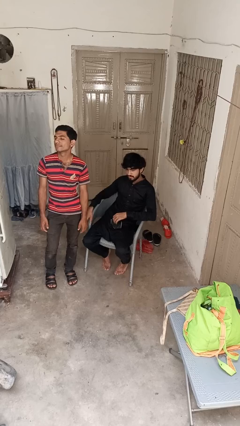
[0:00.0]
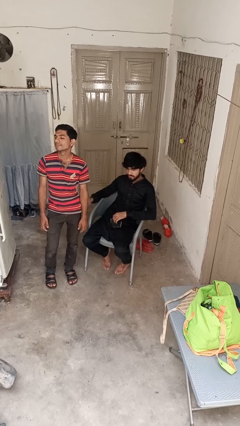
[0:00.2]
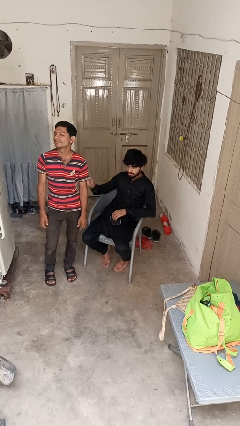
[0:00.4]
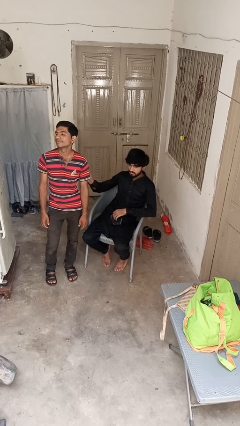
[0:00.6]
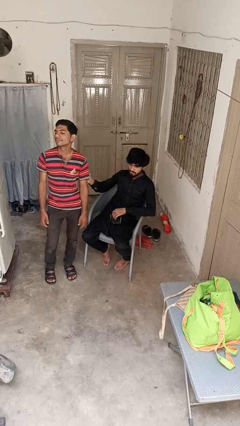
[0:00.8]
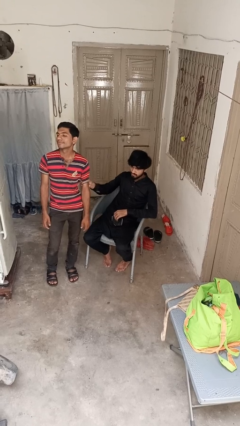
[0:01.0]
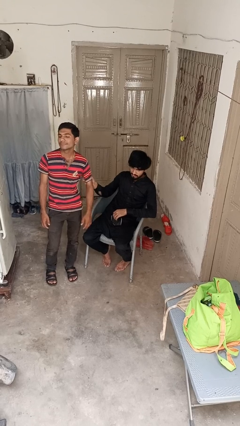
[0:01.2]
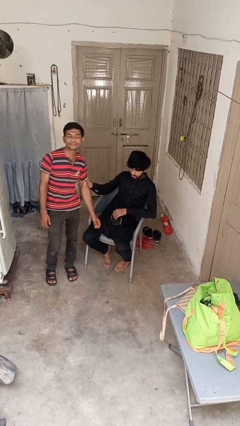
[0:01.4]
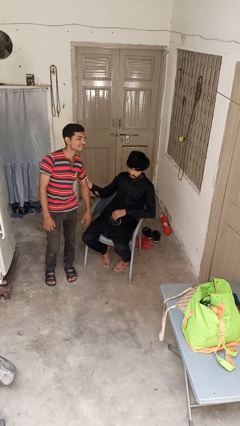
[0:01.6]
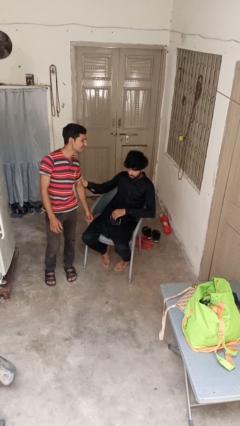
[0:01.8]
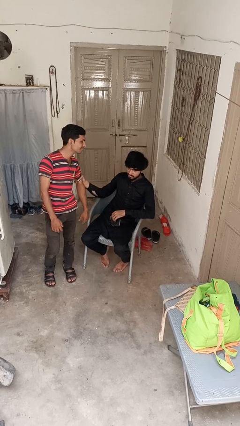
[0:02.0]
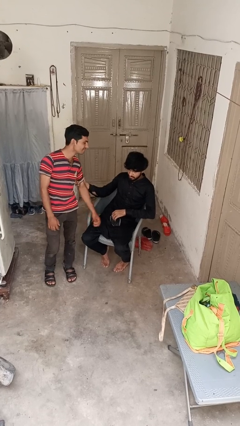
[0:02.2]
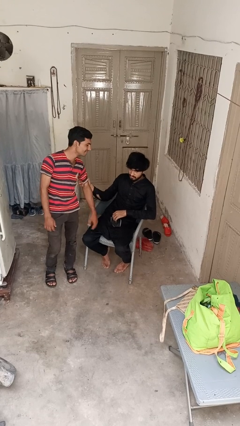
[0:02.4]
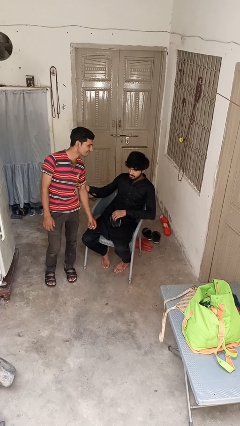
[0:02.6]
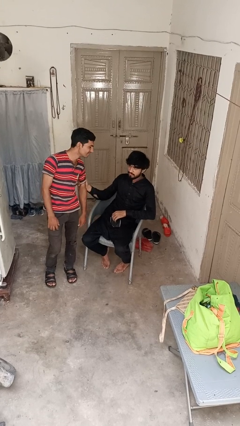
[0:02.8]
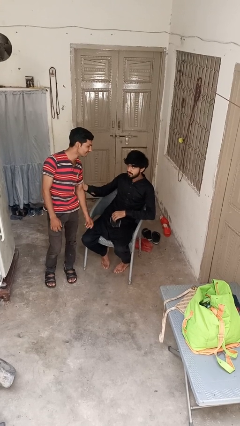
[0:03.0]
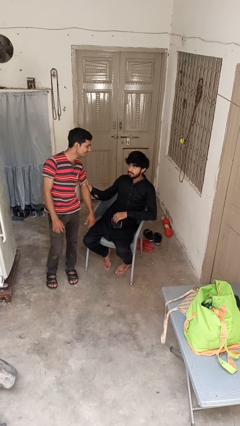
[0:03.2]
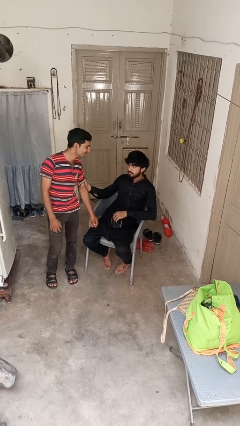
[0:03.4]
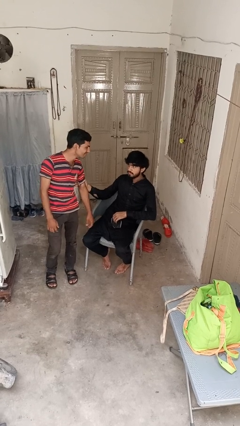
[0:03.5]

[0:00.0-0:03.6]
person grabs person by bicep

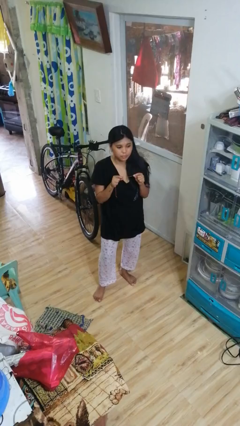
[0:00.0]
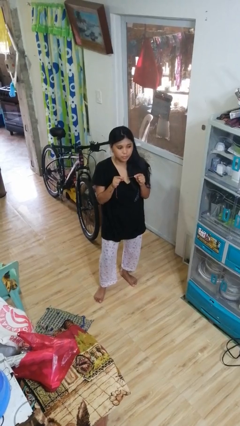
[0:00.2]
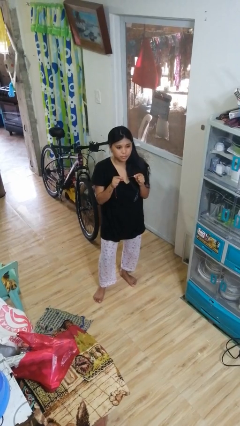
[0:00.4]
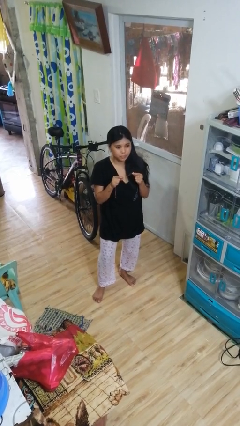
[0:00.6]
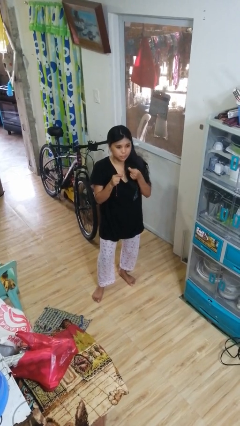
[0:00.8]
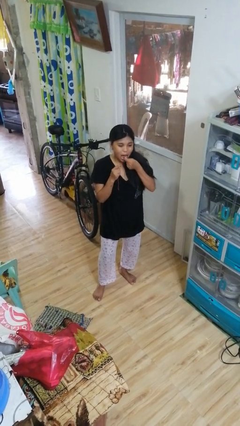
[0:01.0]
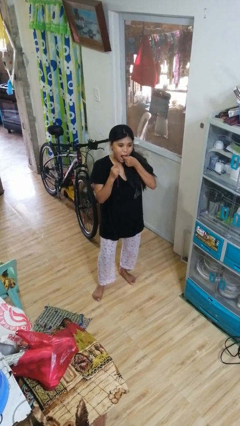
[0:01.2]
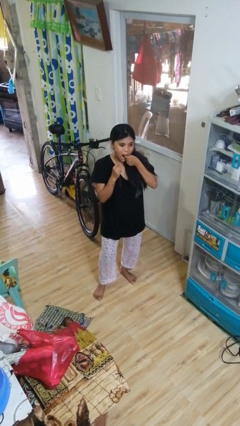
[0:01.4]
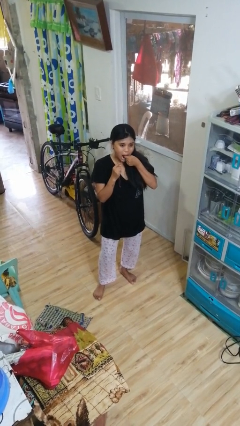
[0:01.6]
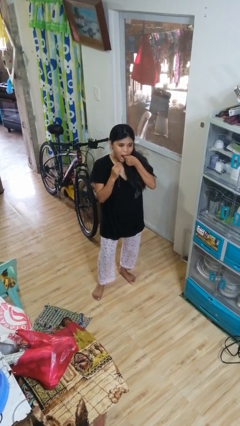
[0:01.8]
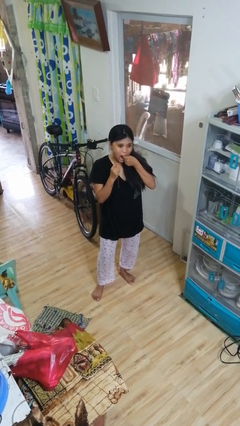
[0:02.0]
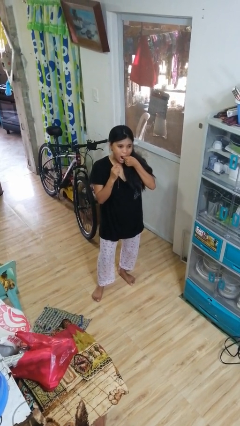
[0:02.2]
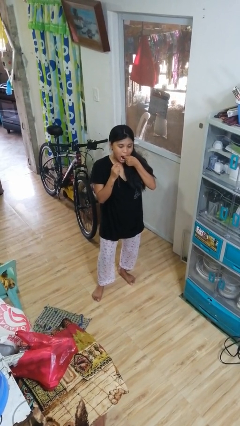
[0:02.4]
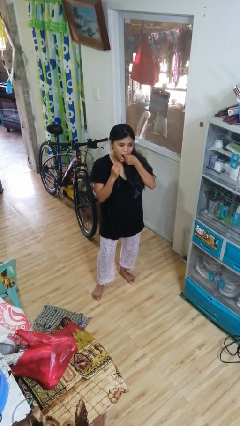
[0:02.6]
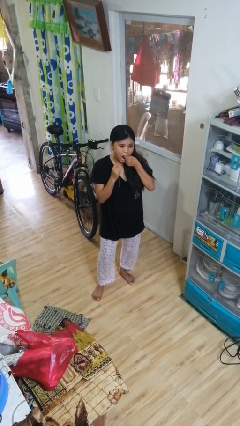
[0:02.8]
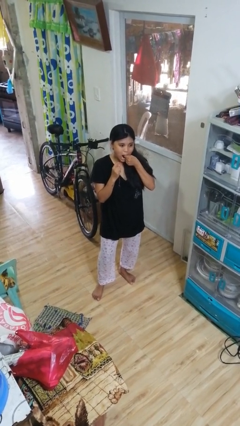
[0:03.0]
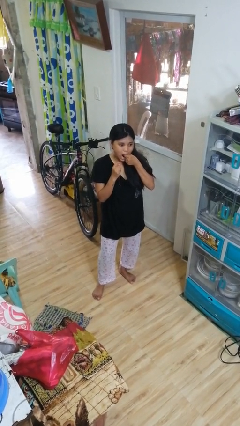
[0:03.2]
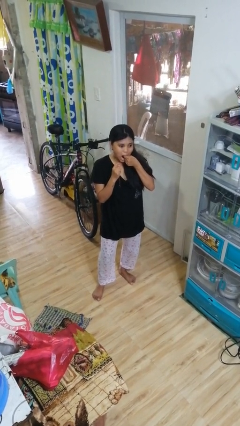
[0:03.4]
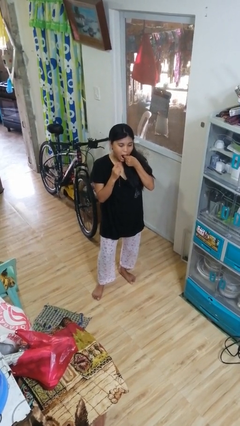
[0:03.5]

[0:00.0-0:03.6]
person flosses

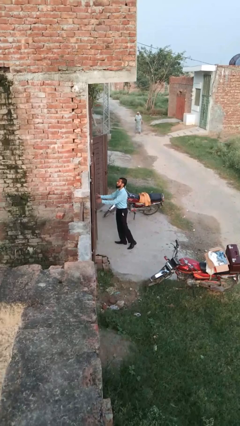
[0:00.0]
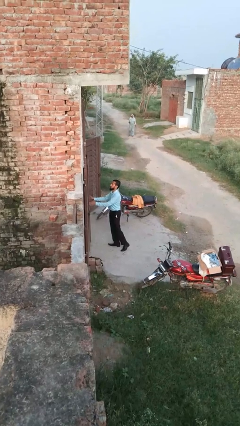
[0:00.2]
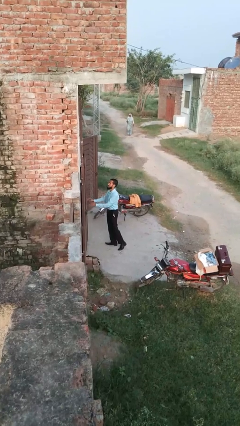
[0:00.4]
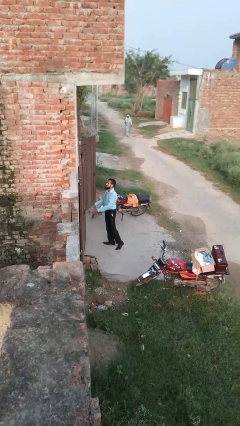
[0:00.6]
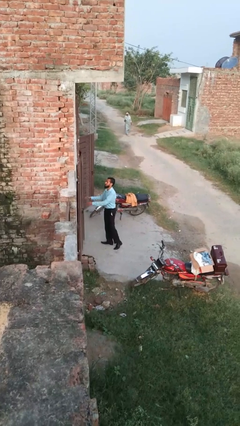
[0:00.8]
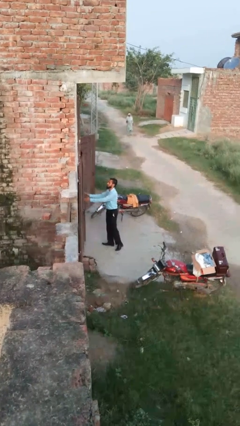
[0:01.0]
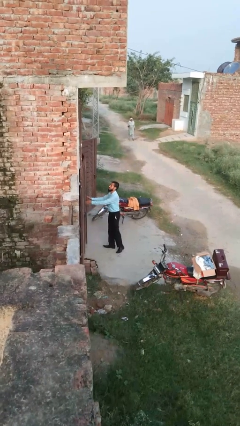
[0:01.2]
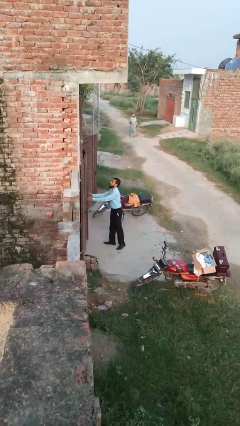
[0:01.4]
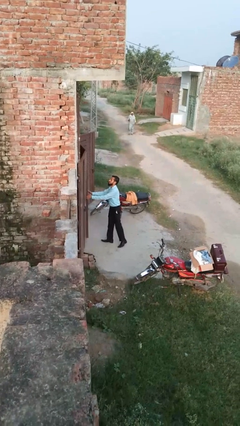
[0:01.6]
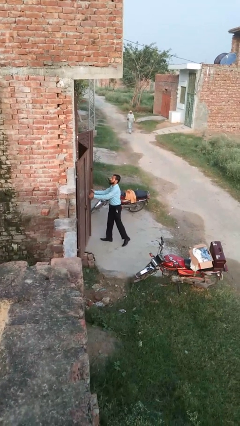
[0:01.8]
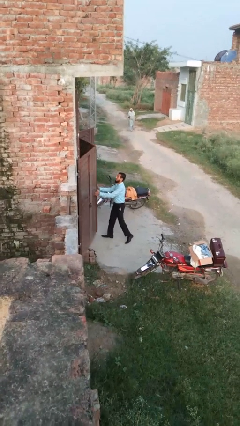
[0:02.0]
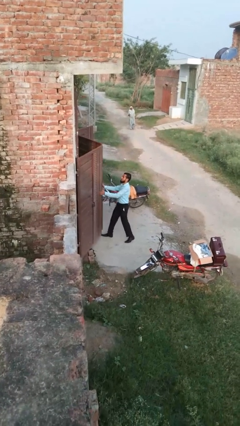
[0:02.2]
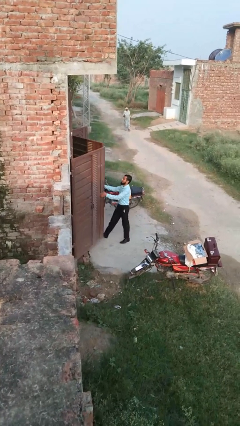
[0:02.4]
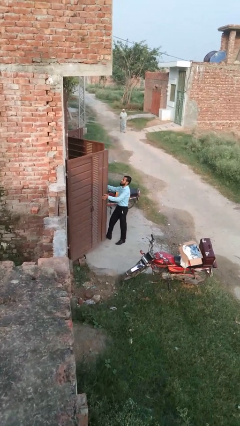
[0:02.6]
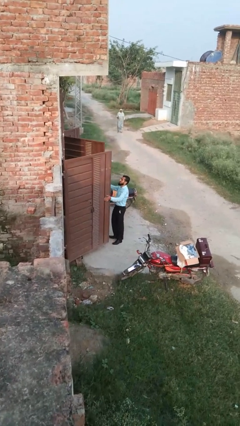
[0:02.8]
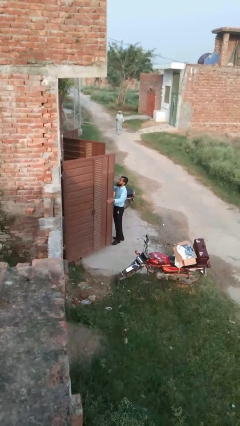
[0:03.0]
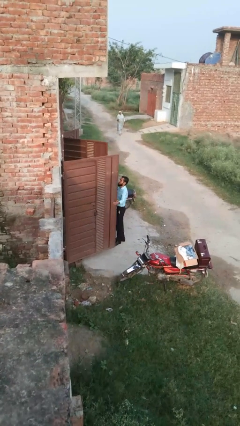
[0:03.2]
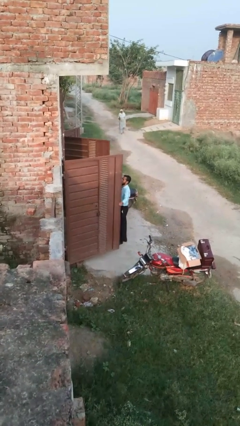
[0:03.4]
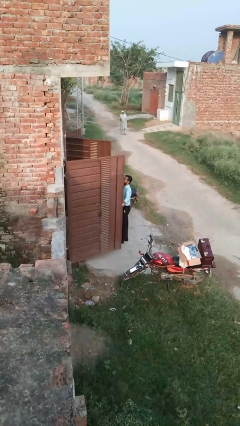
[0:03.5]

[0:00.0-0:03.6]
person opens gate

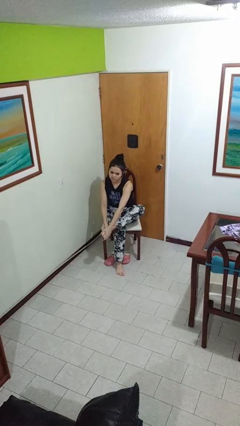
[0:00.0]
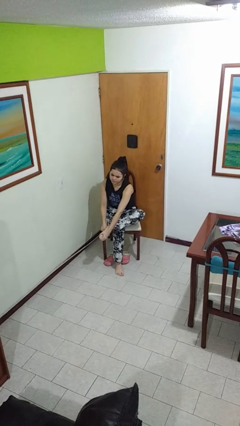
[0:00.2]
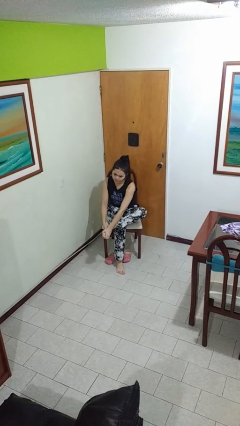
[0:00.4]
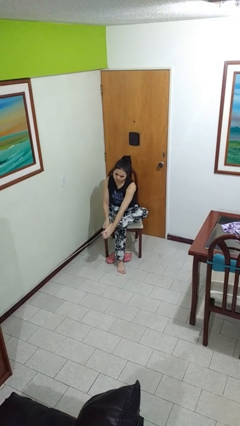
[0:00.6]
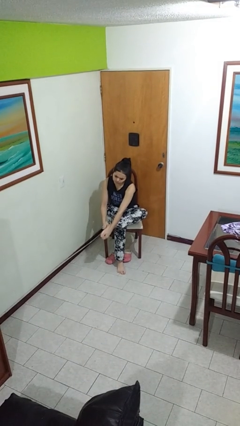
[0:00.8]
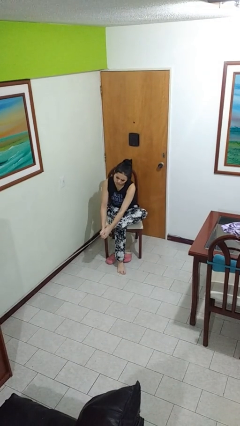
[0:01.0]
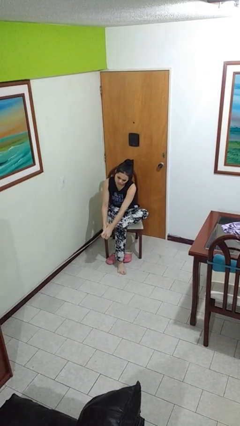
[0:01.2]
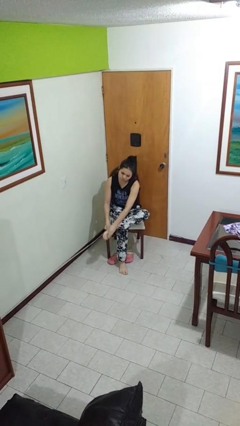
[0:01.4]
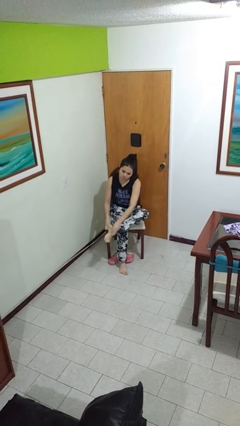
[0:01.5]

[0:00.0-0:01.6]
person rubs foot

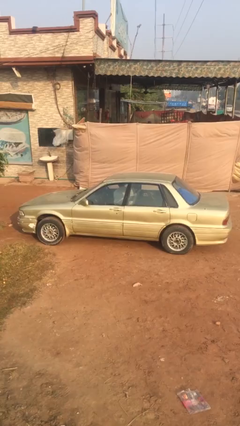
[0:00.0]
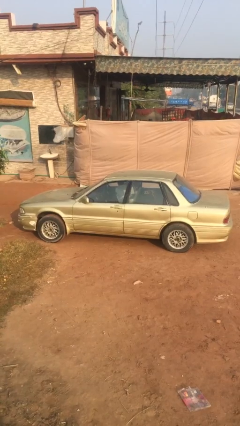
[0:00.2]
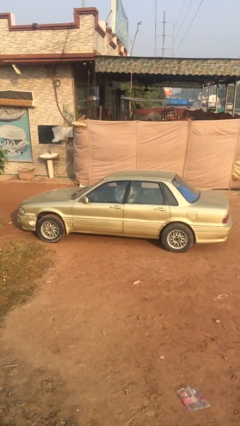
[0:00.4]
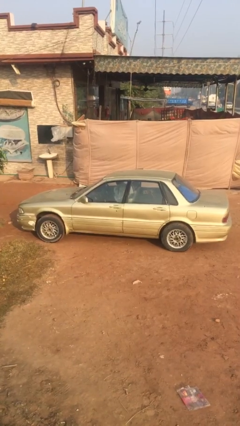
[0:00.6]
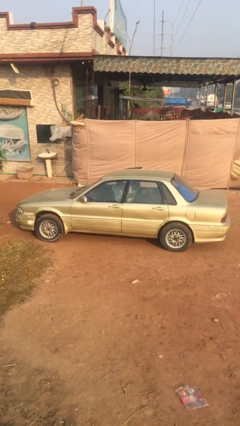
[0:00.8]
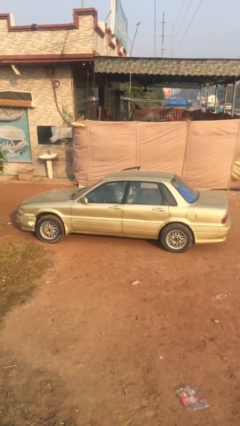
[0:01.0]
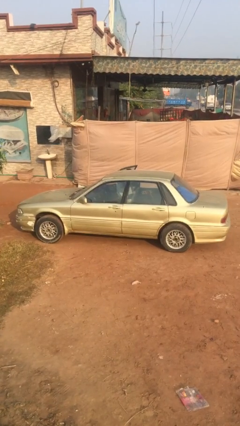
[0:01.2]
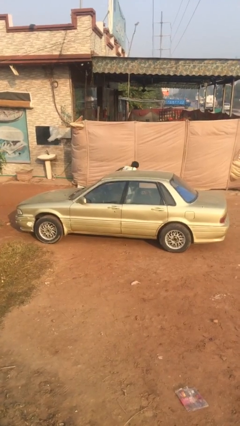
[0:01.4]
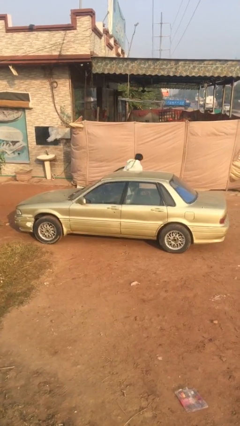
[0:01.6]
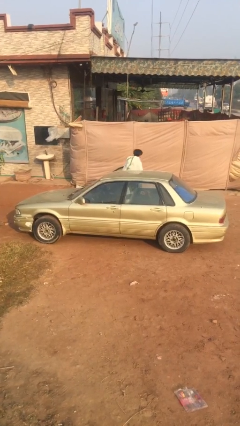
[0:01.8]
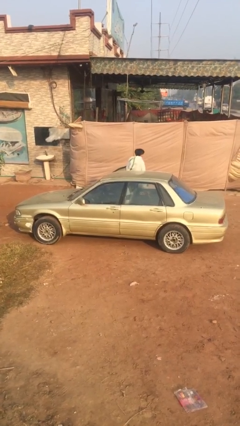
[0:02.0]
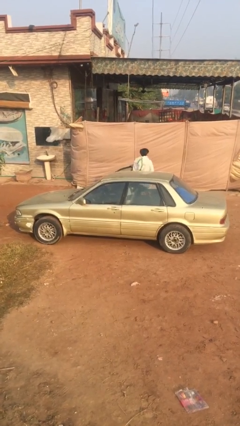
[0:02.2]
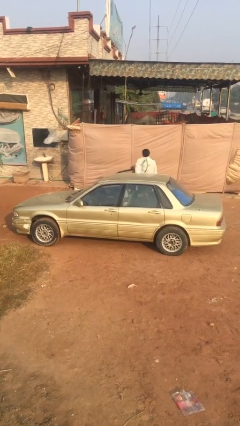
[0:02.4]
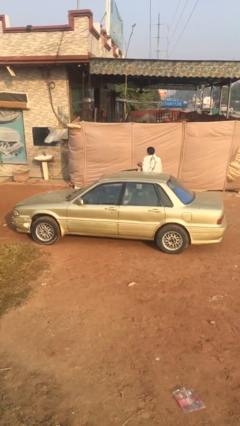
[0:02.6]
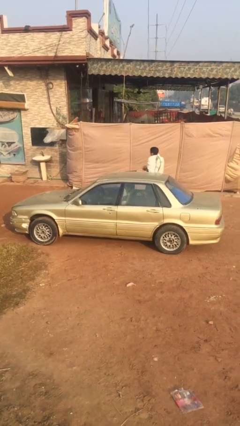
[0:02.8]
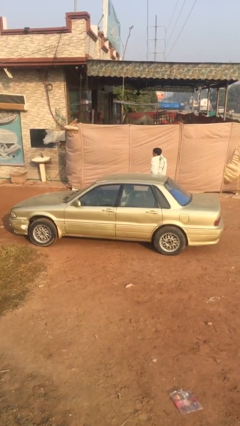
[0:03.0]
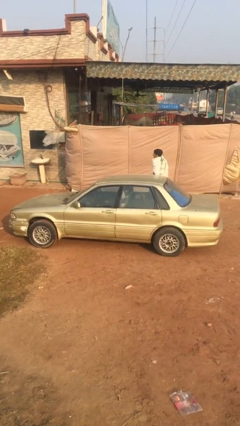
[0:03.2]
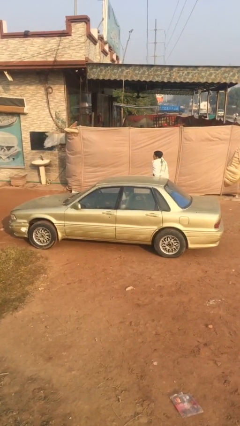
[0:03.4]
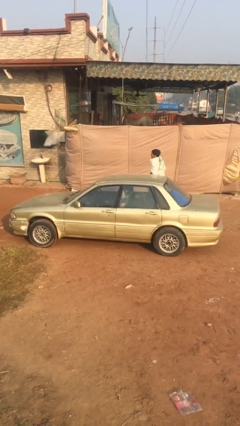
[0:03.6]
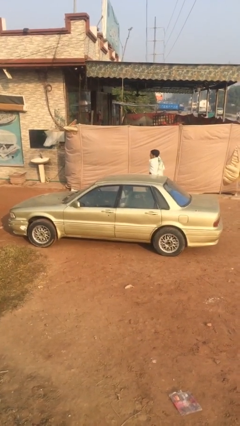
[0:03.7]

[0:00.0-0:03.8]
car drops off person

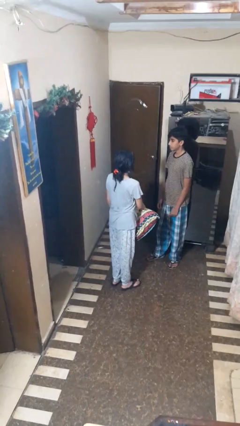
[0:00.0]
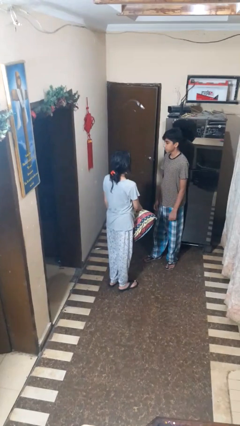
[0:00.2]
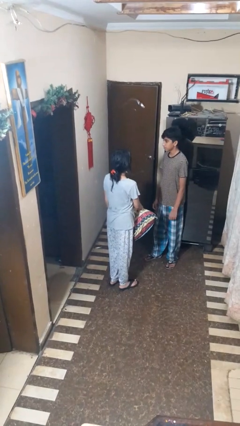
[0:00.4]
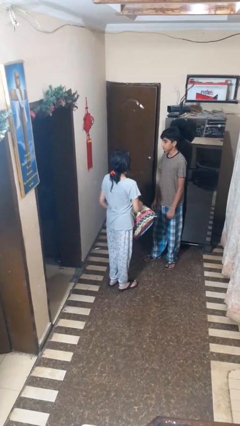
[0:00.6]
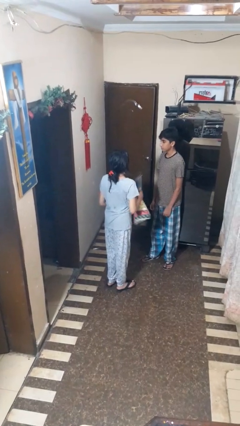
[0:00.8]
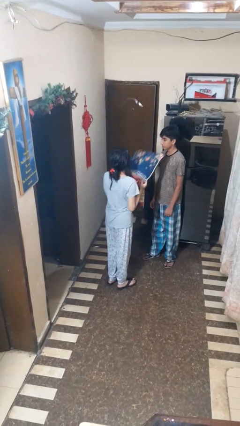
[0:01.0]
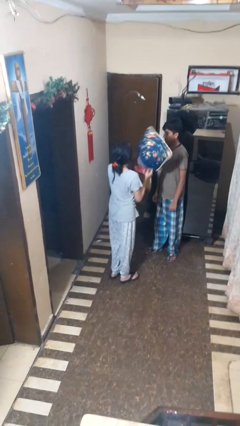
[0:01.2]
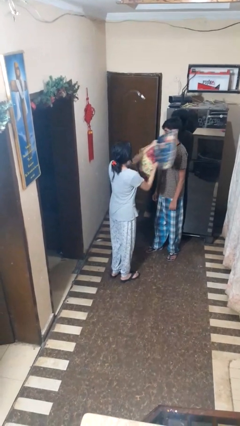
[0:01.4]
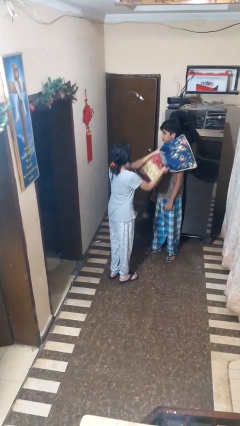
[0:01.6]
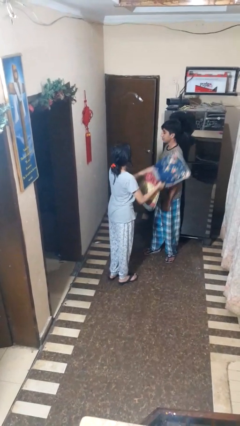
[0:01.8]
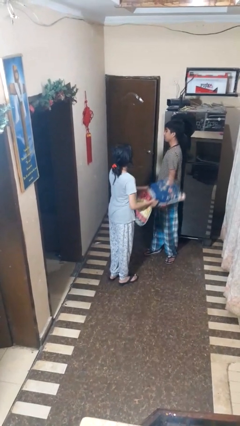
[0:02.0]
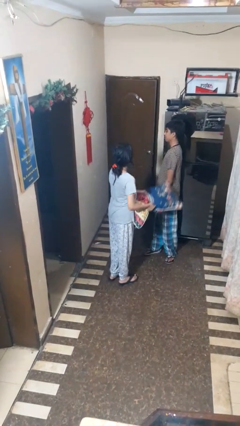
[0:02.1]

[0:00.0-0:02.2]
person hits person with pillow
